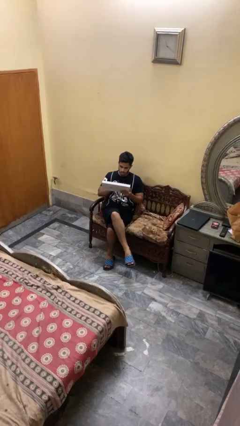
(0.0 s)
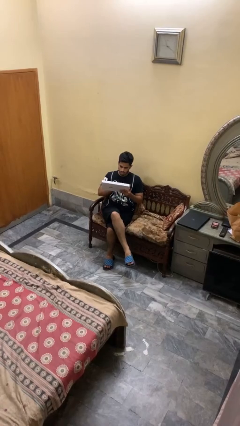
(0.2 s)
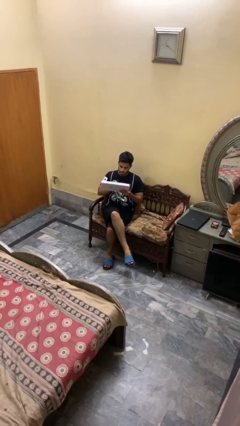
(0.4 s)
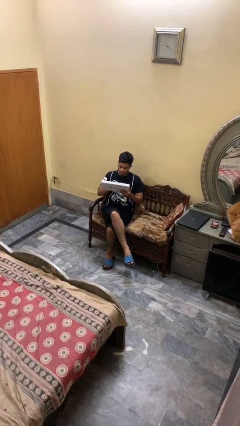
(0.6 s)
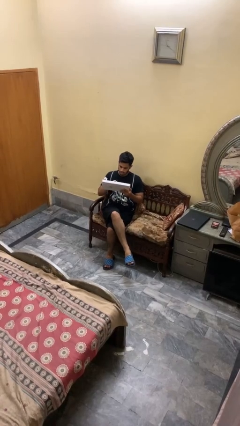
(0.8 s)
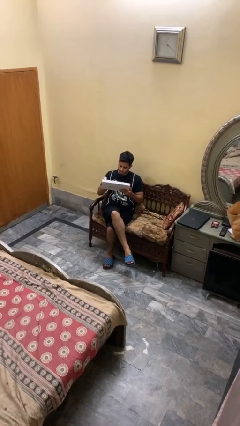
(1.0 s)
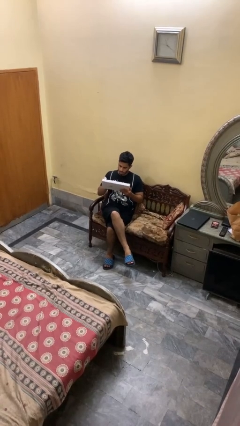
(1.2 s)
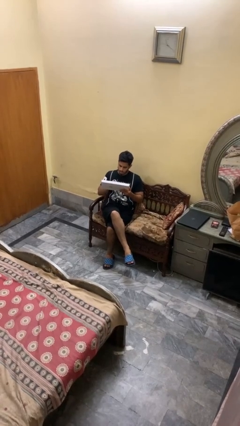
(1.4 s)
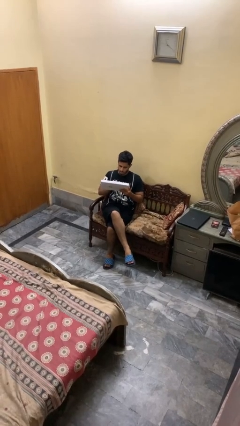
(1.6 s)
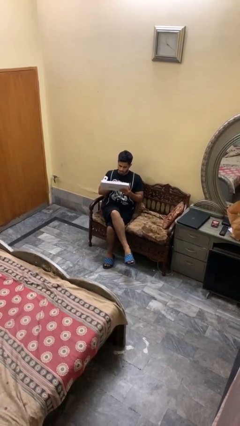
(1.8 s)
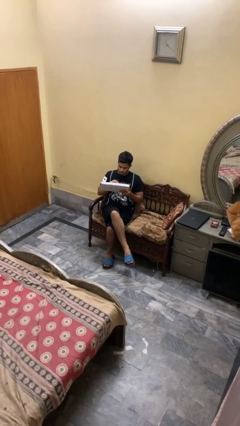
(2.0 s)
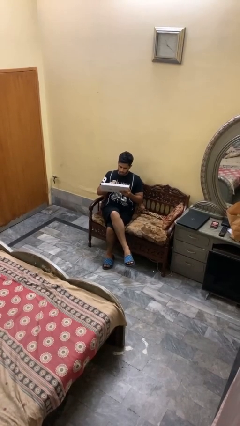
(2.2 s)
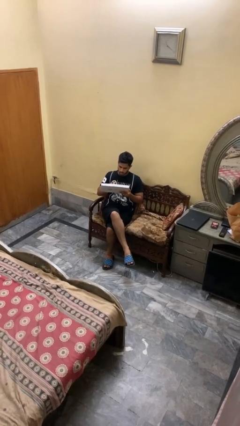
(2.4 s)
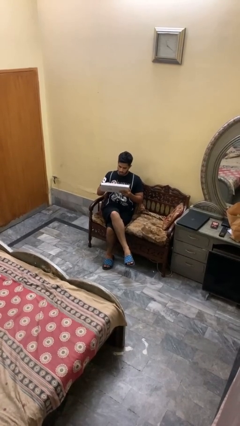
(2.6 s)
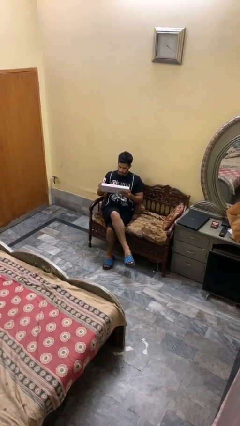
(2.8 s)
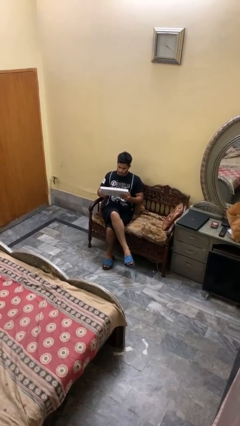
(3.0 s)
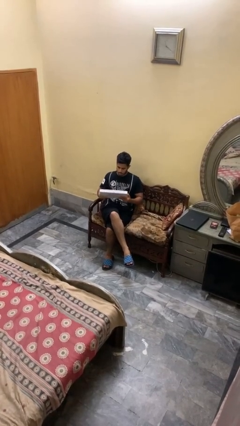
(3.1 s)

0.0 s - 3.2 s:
person interacts with tablet

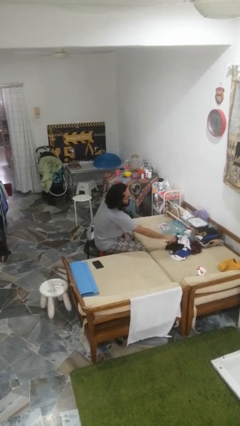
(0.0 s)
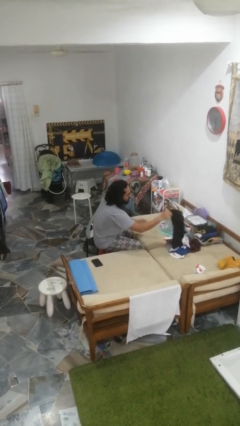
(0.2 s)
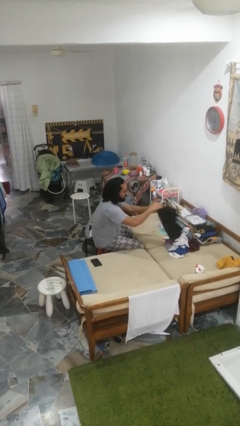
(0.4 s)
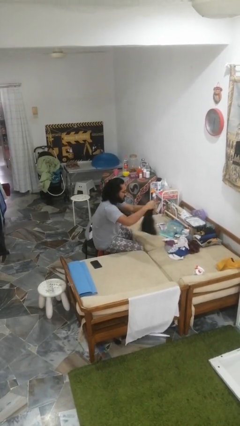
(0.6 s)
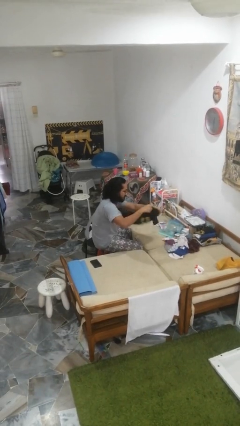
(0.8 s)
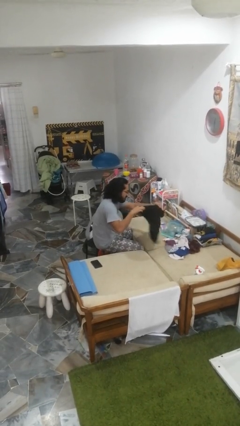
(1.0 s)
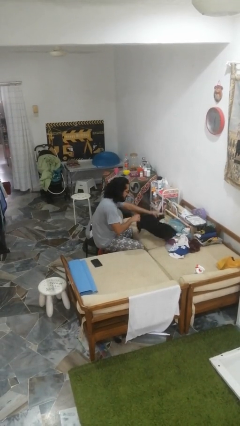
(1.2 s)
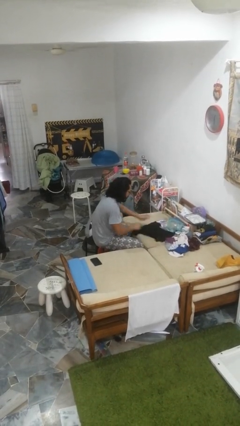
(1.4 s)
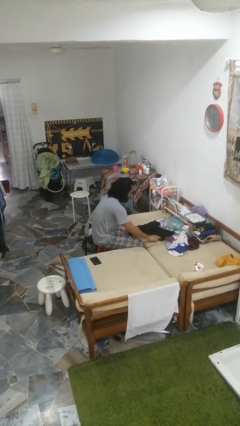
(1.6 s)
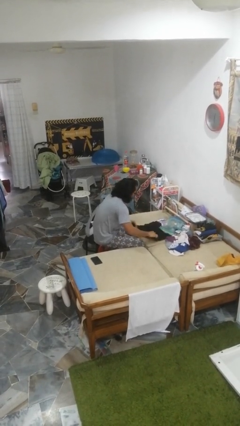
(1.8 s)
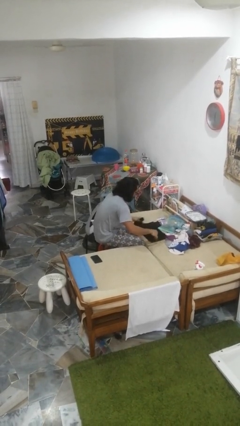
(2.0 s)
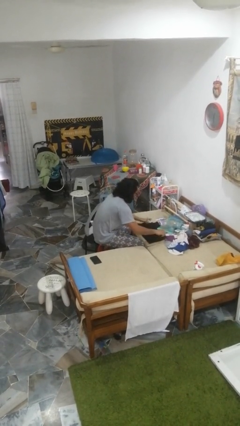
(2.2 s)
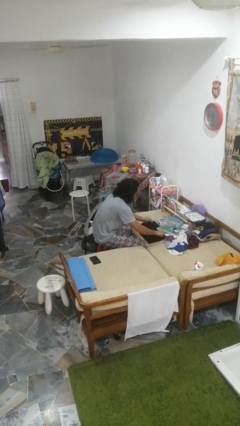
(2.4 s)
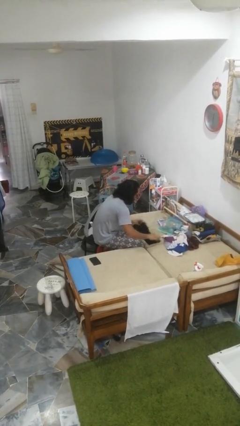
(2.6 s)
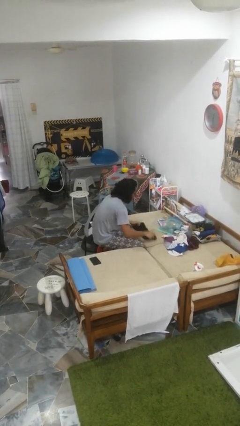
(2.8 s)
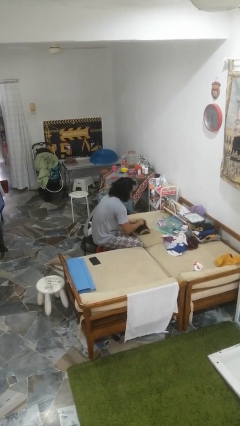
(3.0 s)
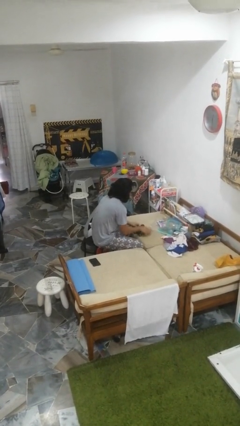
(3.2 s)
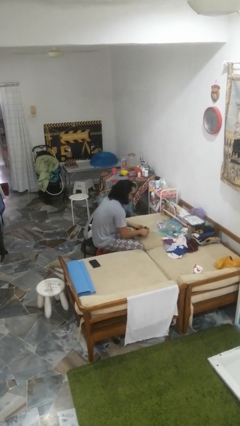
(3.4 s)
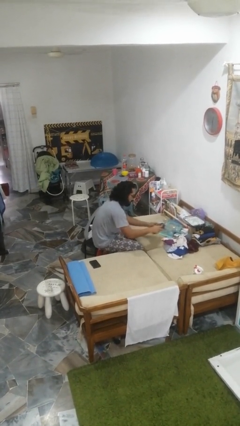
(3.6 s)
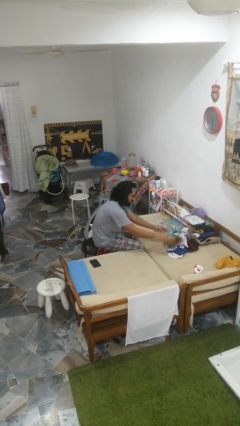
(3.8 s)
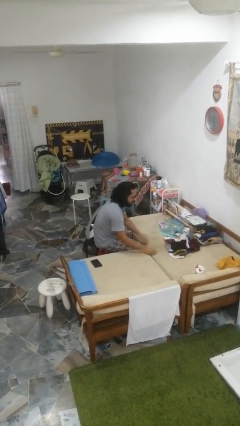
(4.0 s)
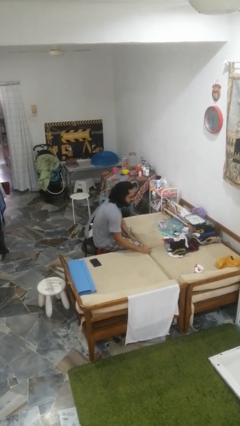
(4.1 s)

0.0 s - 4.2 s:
person folds shirt

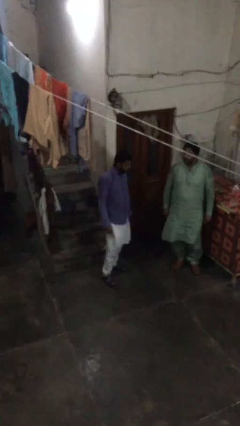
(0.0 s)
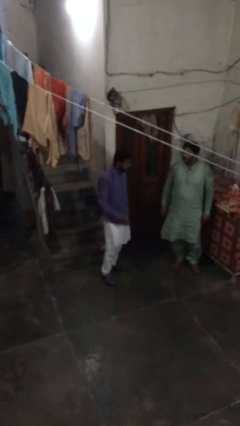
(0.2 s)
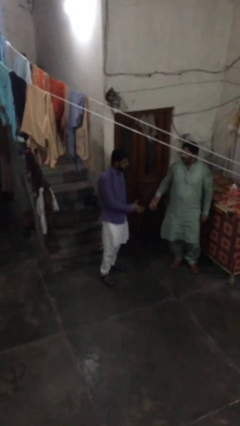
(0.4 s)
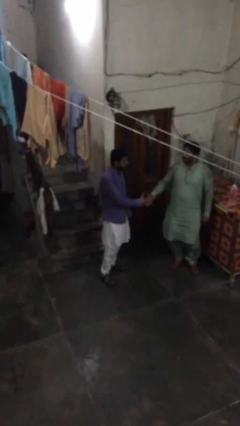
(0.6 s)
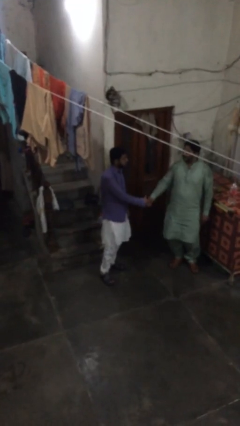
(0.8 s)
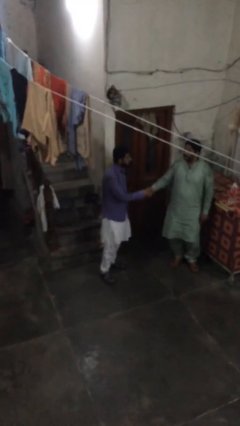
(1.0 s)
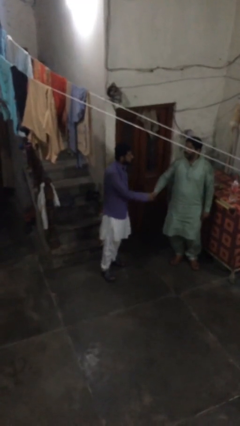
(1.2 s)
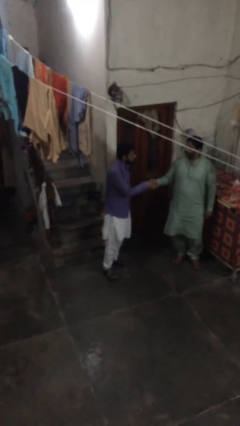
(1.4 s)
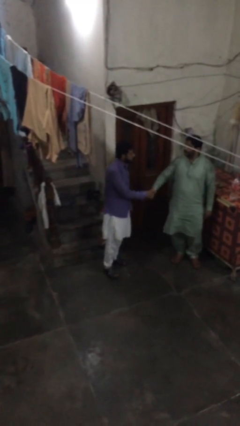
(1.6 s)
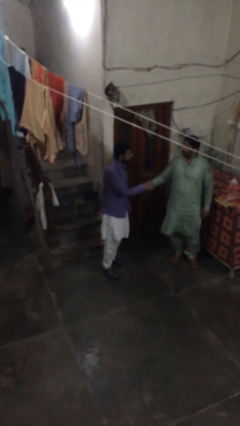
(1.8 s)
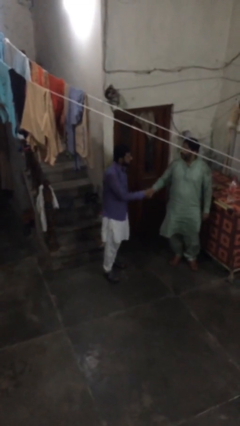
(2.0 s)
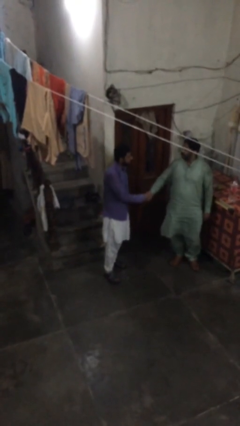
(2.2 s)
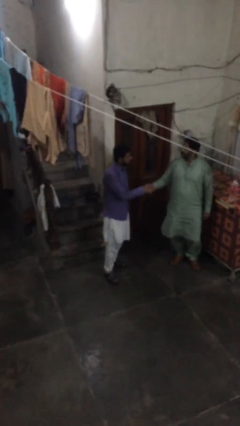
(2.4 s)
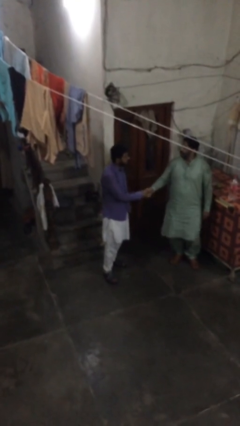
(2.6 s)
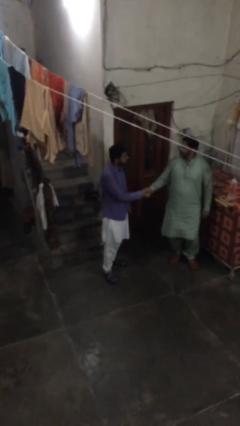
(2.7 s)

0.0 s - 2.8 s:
person shakes hand

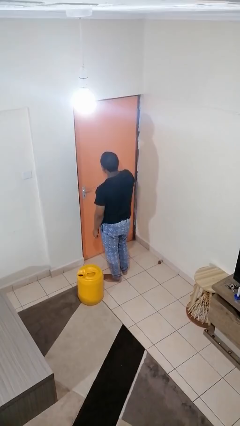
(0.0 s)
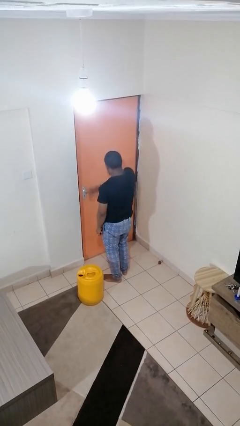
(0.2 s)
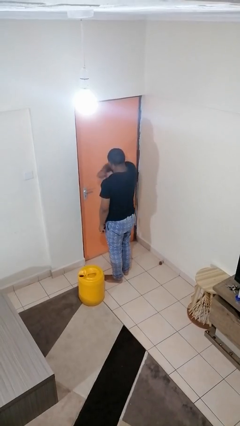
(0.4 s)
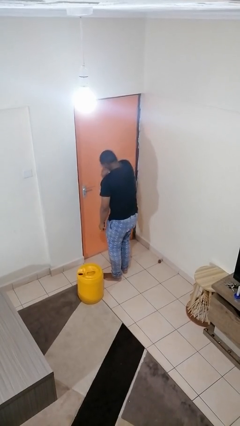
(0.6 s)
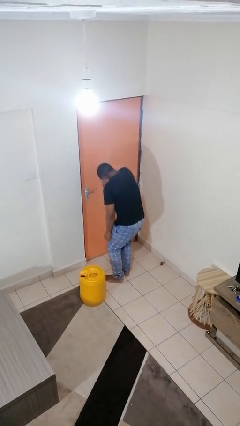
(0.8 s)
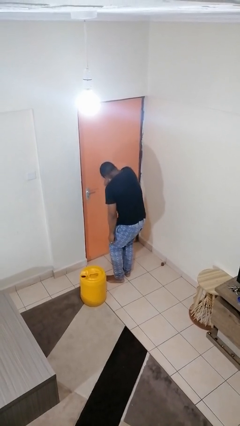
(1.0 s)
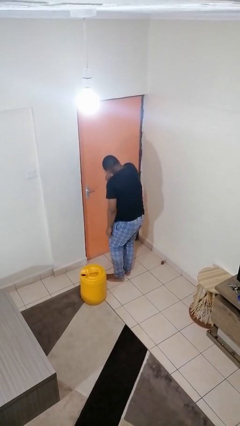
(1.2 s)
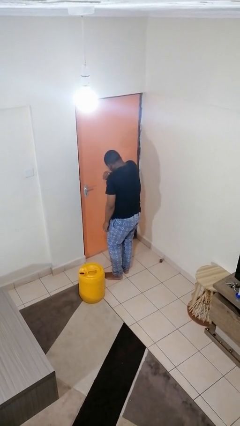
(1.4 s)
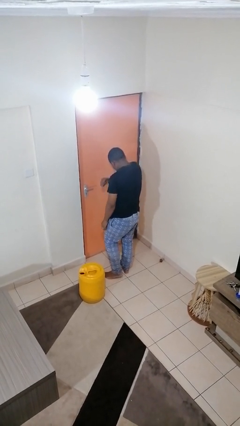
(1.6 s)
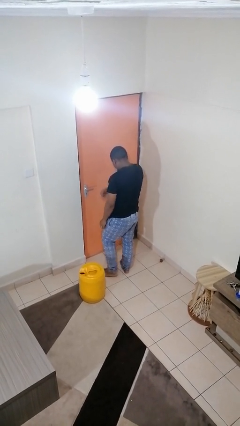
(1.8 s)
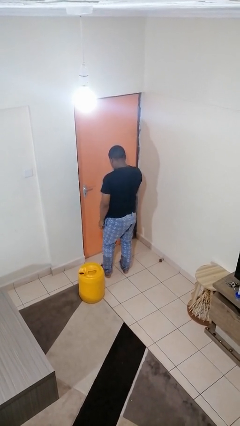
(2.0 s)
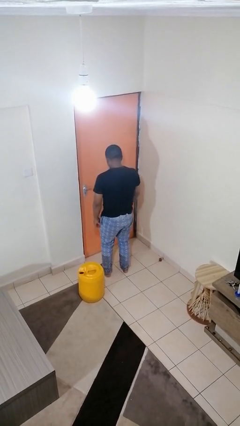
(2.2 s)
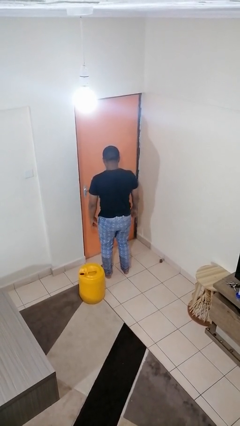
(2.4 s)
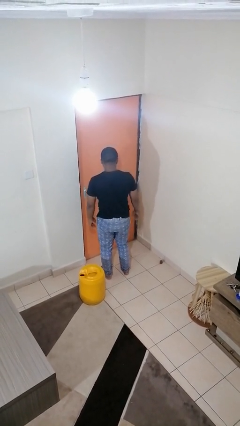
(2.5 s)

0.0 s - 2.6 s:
person sneezes into arm

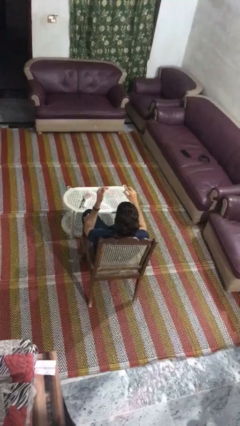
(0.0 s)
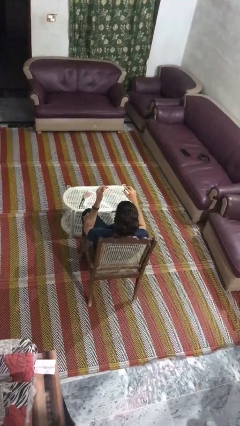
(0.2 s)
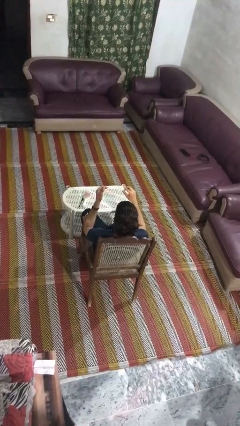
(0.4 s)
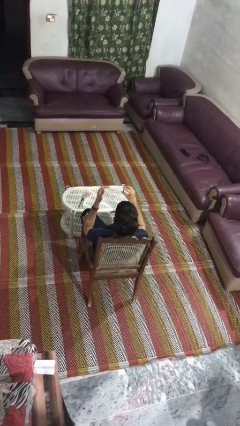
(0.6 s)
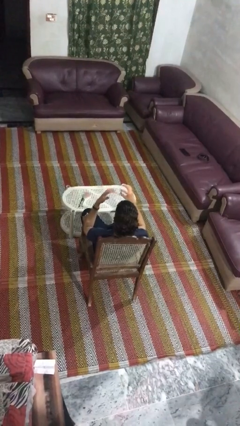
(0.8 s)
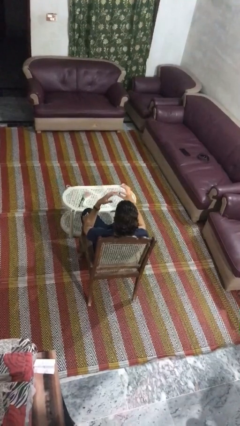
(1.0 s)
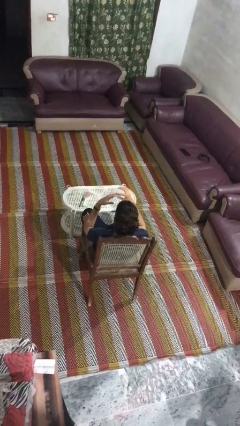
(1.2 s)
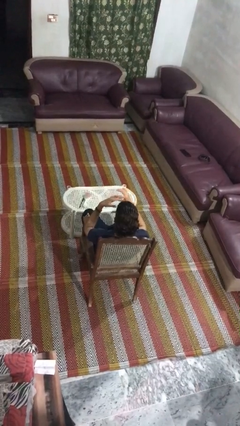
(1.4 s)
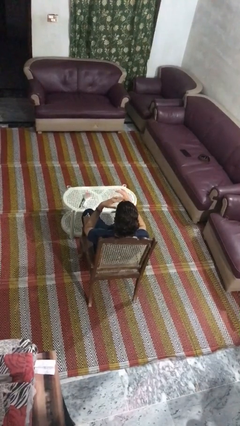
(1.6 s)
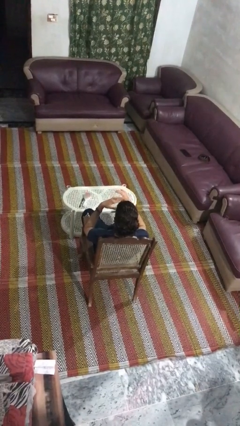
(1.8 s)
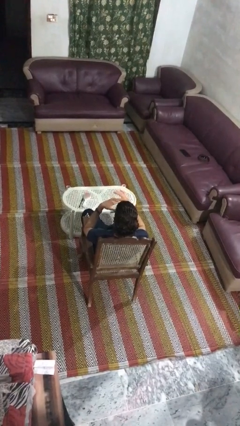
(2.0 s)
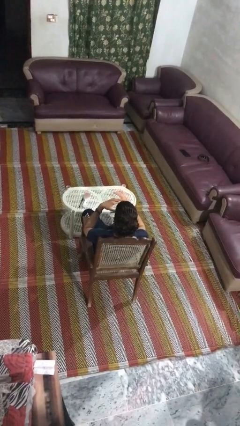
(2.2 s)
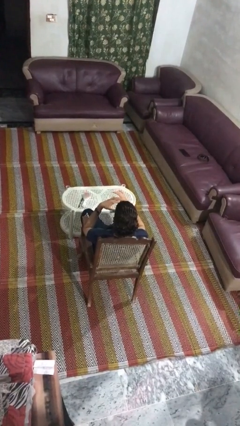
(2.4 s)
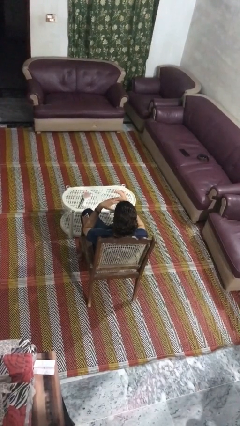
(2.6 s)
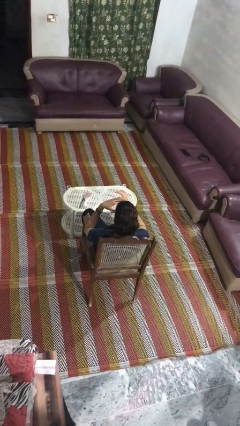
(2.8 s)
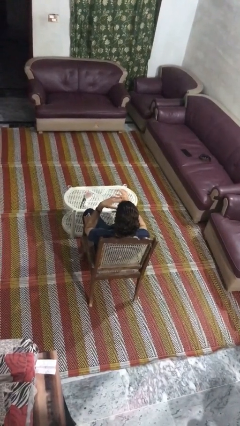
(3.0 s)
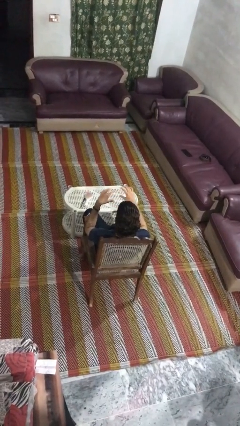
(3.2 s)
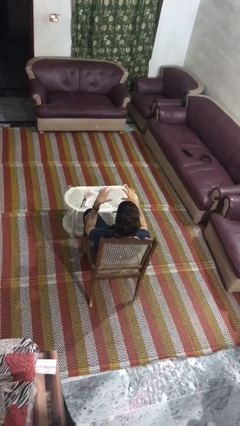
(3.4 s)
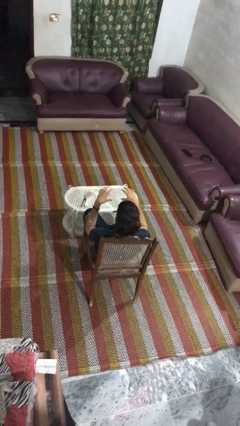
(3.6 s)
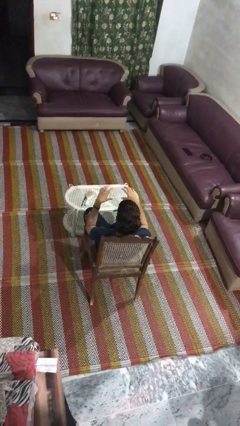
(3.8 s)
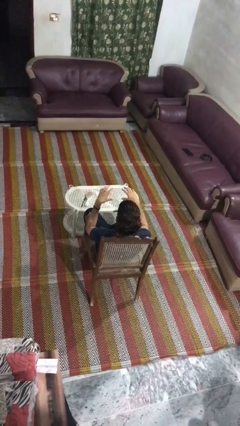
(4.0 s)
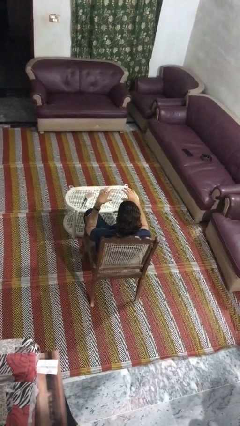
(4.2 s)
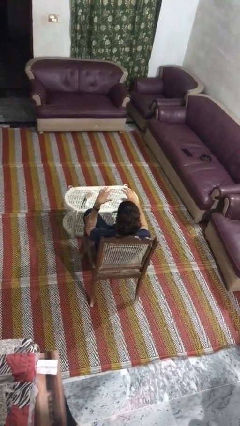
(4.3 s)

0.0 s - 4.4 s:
person puts on ring

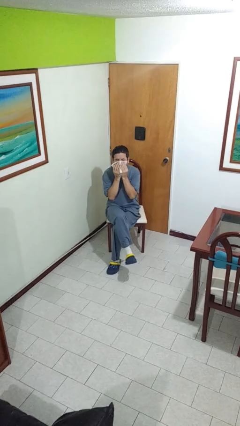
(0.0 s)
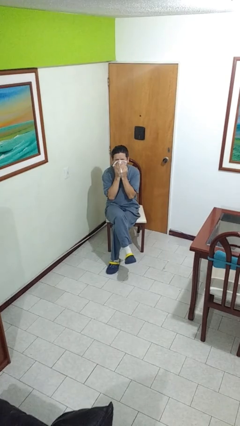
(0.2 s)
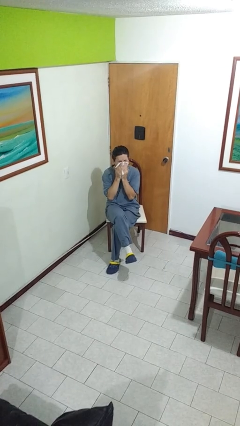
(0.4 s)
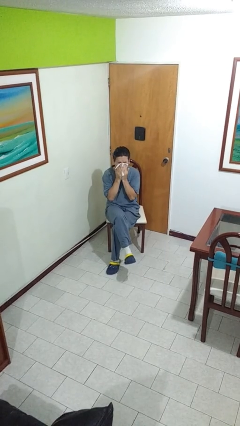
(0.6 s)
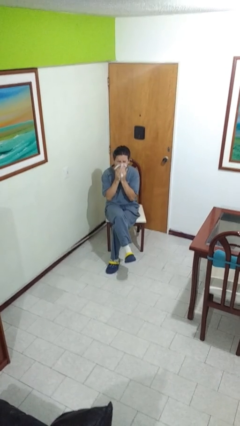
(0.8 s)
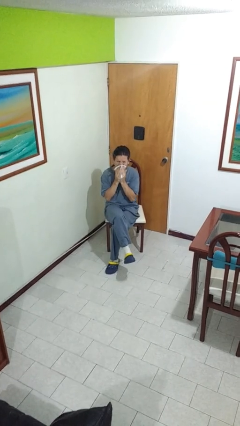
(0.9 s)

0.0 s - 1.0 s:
person blows nose
